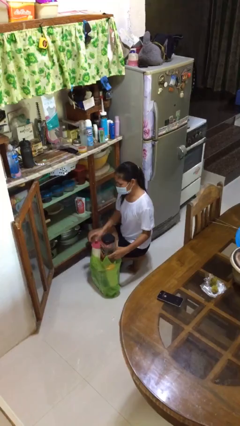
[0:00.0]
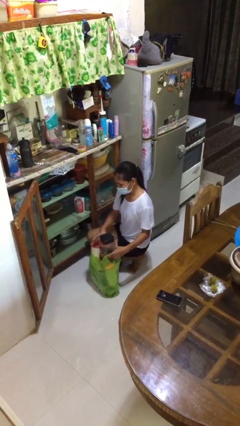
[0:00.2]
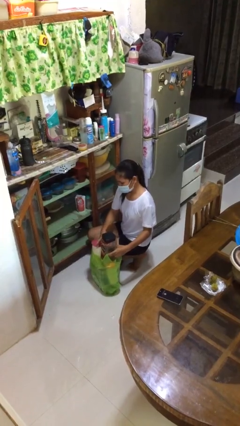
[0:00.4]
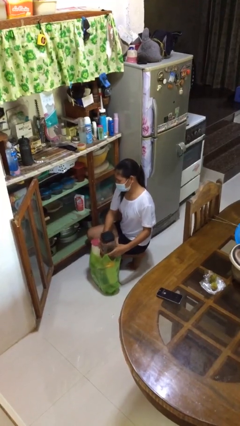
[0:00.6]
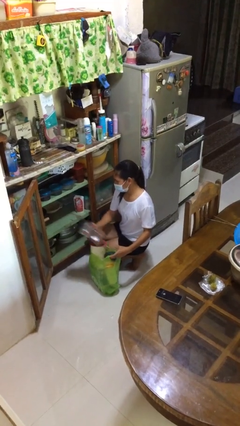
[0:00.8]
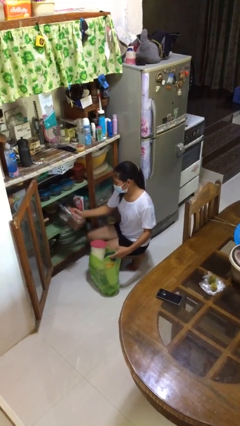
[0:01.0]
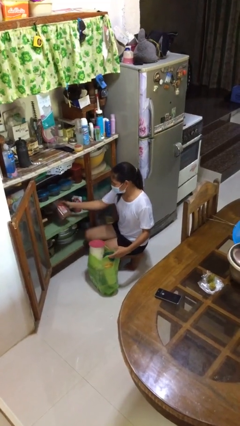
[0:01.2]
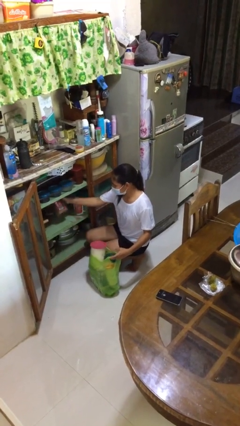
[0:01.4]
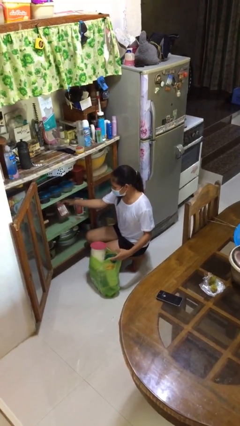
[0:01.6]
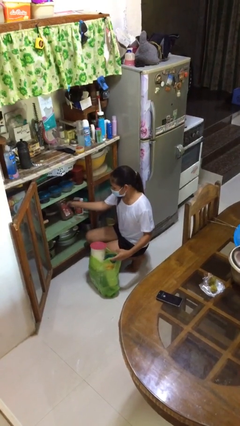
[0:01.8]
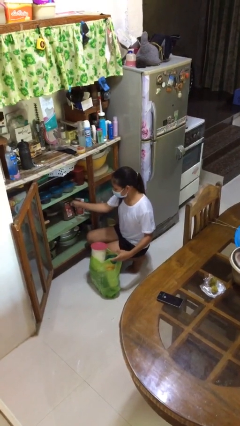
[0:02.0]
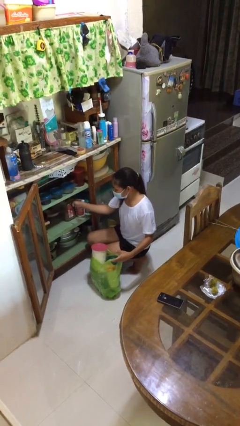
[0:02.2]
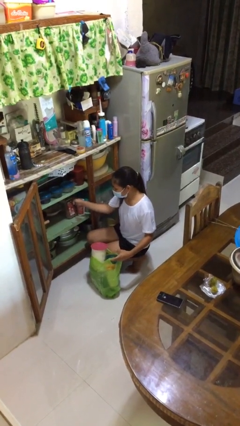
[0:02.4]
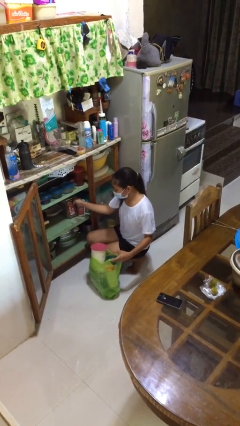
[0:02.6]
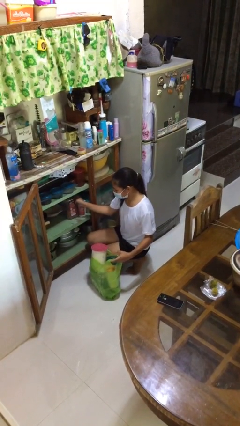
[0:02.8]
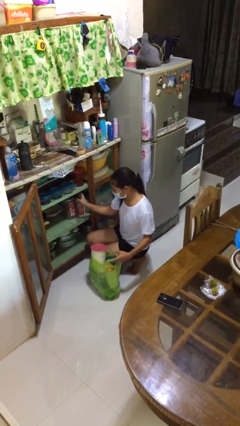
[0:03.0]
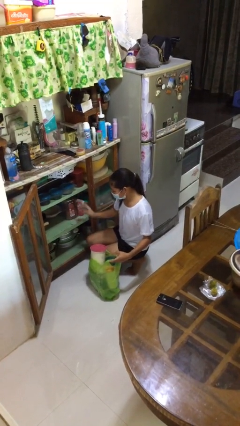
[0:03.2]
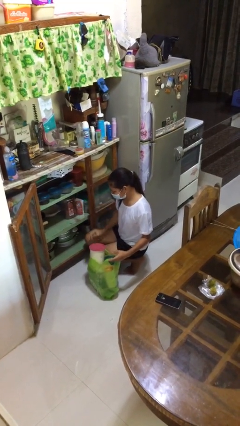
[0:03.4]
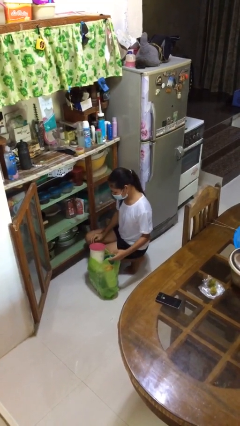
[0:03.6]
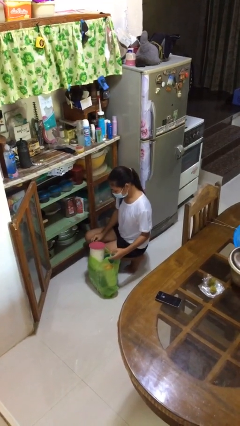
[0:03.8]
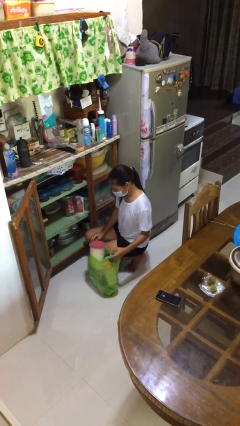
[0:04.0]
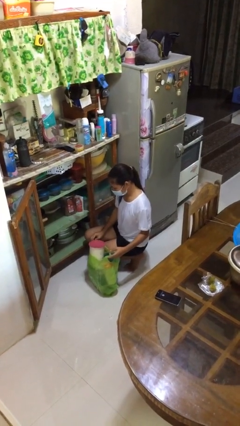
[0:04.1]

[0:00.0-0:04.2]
person loads groceries into cabinet

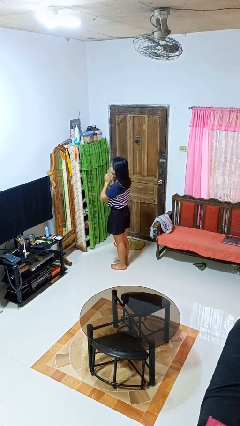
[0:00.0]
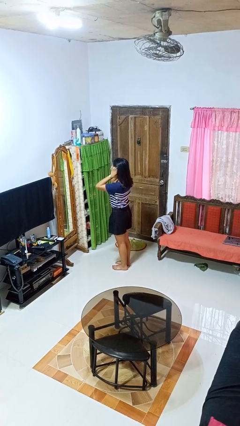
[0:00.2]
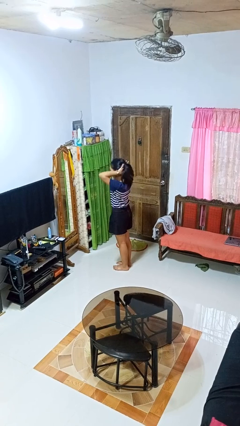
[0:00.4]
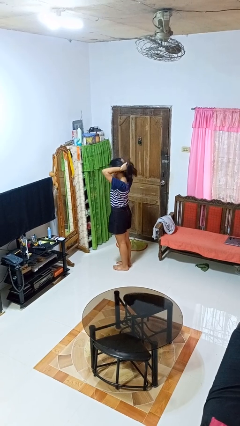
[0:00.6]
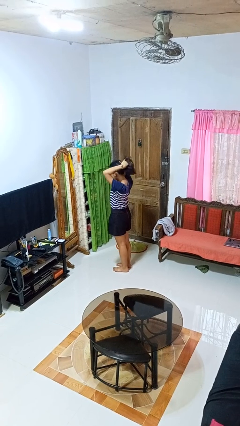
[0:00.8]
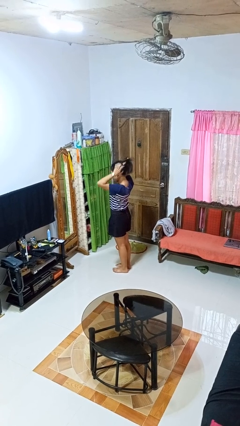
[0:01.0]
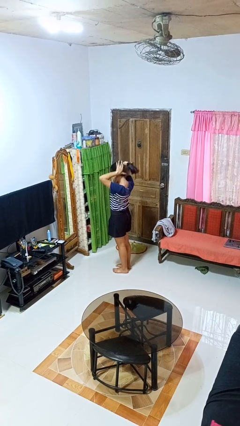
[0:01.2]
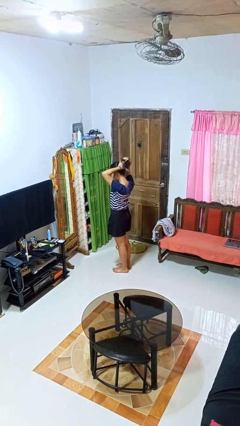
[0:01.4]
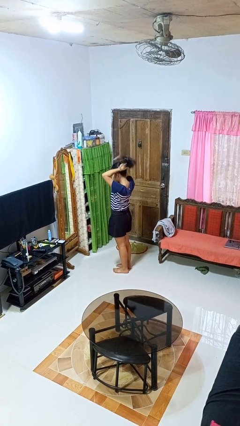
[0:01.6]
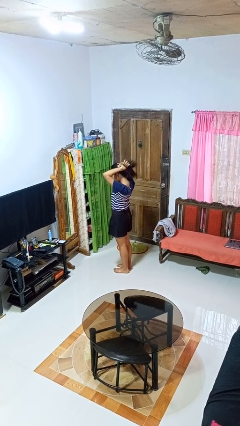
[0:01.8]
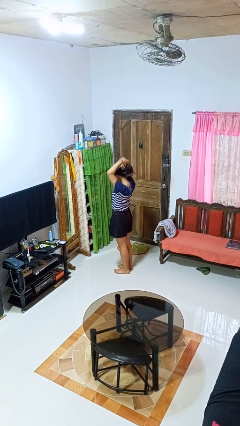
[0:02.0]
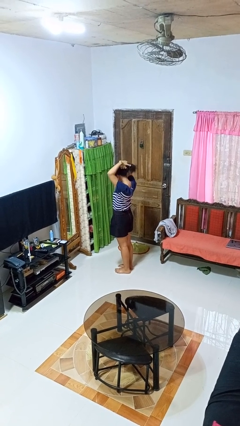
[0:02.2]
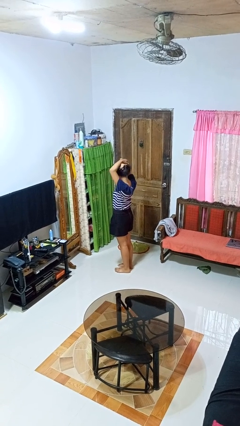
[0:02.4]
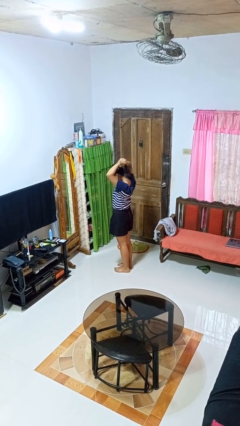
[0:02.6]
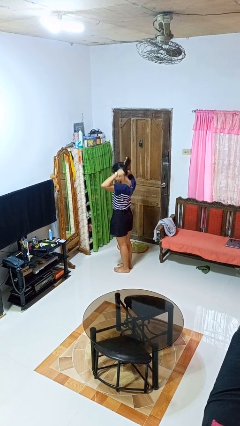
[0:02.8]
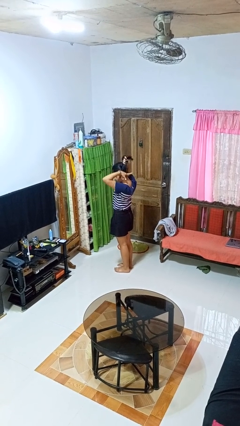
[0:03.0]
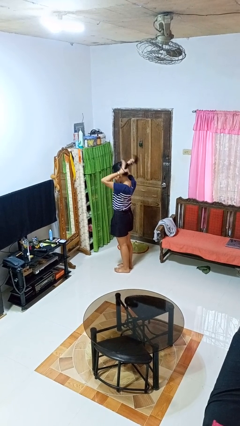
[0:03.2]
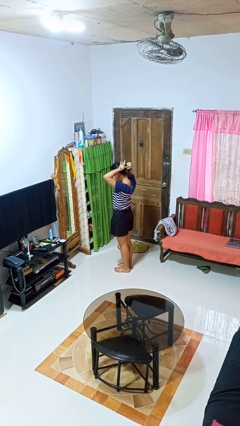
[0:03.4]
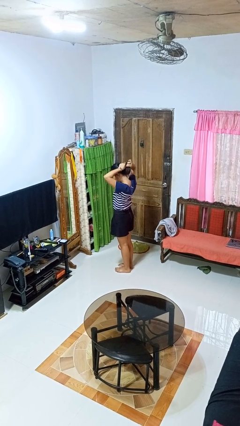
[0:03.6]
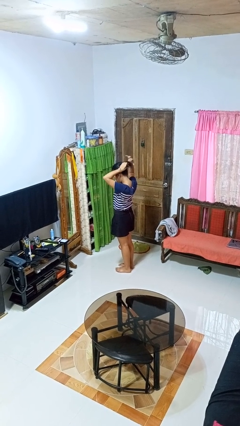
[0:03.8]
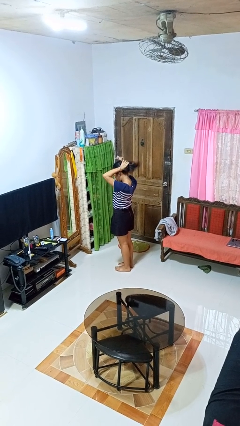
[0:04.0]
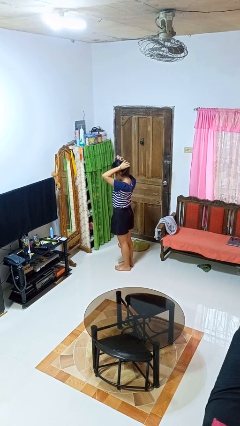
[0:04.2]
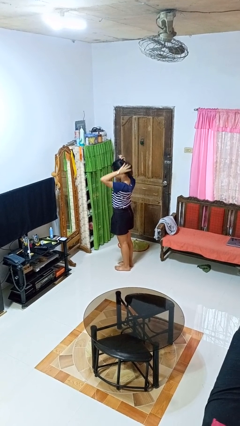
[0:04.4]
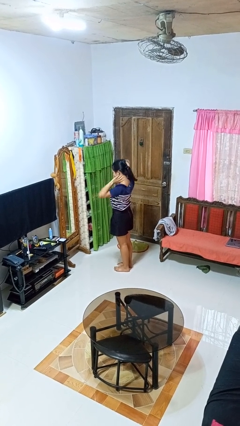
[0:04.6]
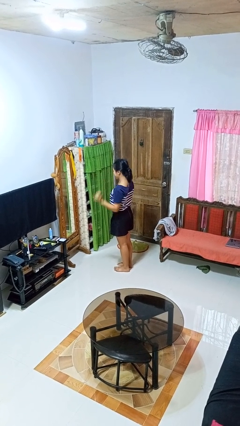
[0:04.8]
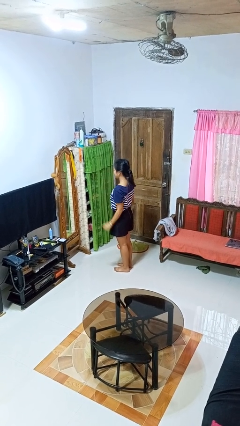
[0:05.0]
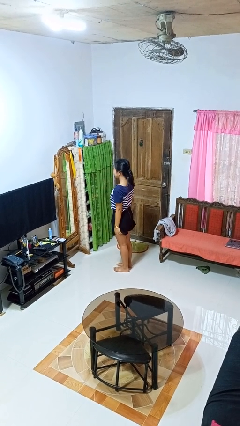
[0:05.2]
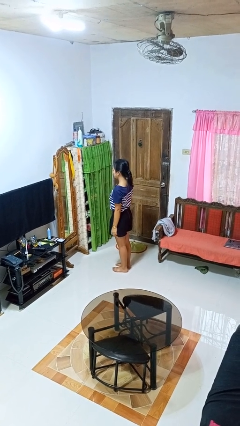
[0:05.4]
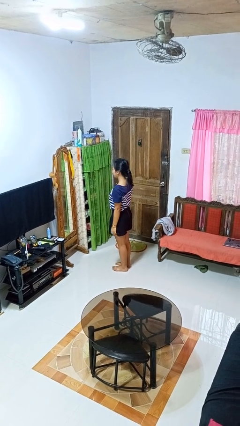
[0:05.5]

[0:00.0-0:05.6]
person puts hair in ponytail

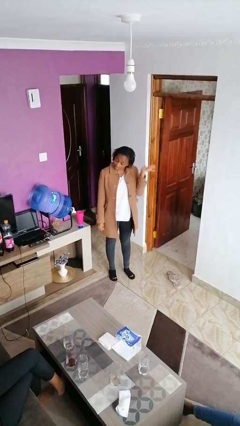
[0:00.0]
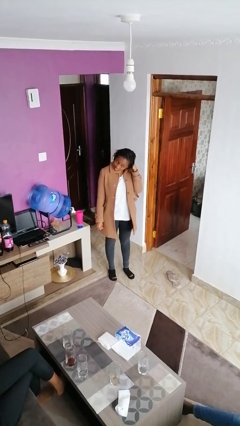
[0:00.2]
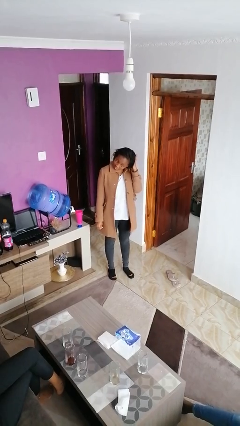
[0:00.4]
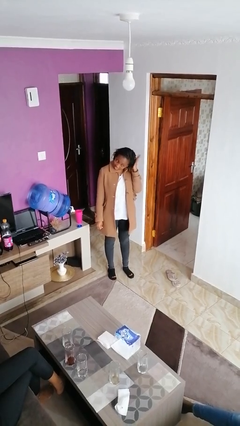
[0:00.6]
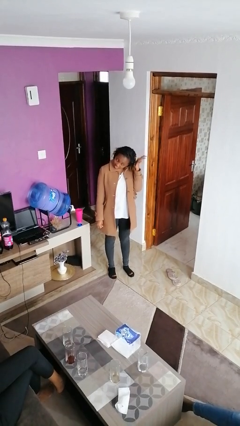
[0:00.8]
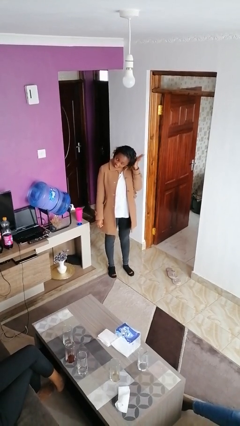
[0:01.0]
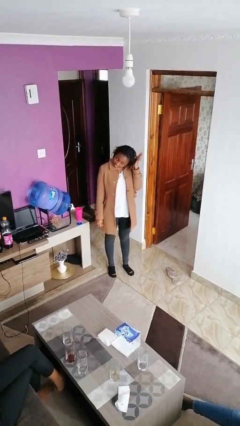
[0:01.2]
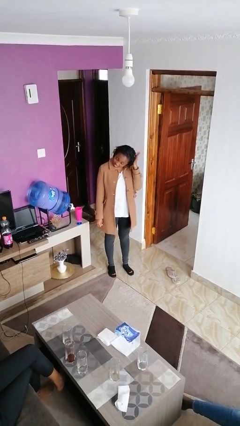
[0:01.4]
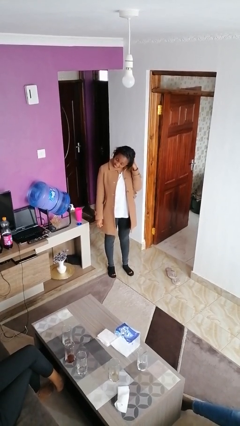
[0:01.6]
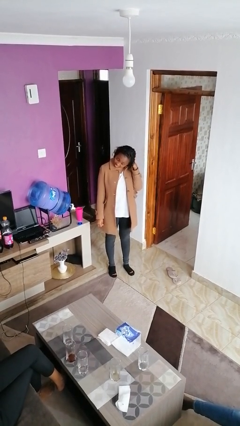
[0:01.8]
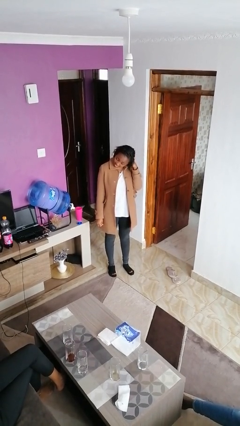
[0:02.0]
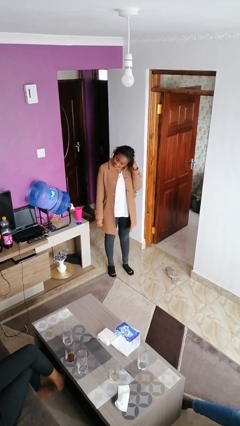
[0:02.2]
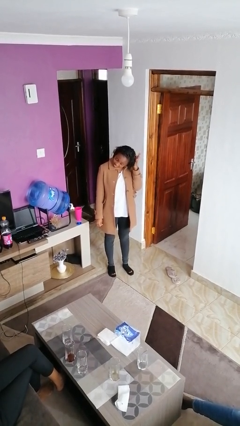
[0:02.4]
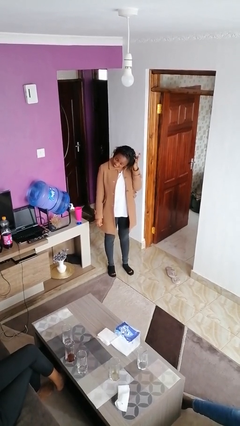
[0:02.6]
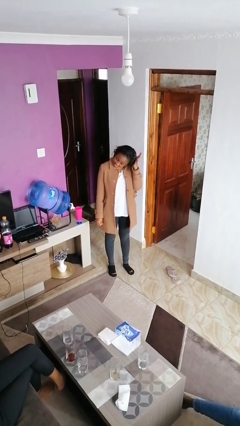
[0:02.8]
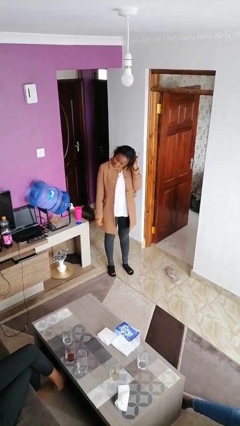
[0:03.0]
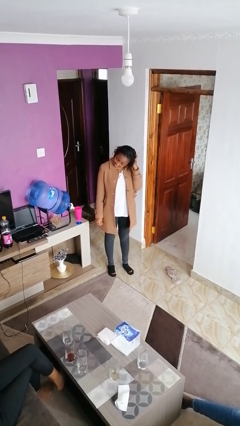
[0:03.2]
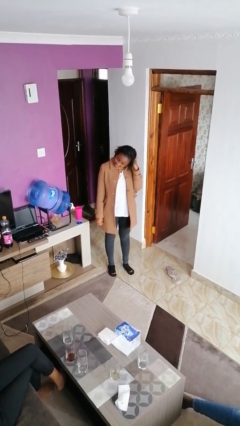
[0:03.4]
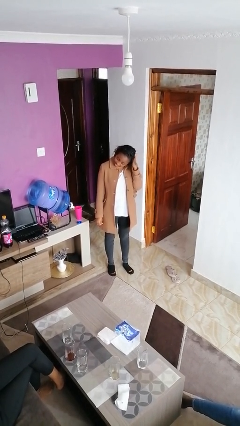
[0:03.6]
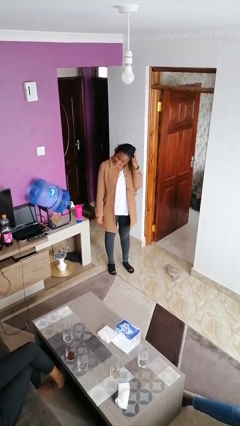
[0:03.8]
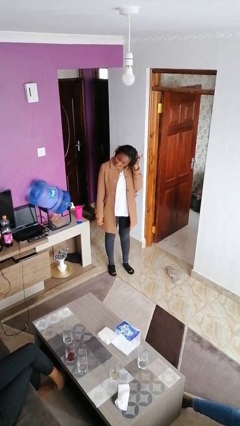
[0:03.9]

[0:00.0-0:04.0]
person scratches face

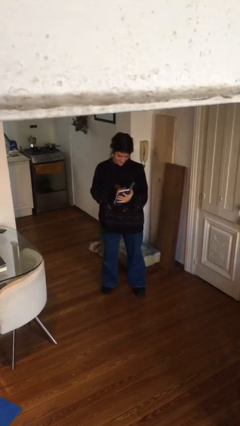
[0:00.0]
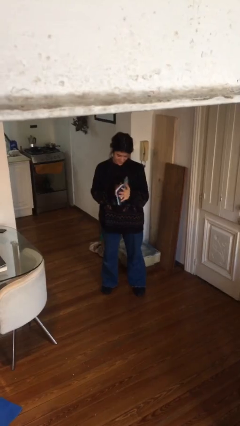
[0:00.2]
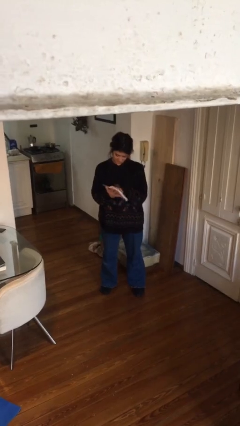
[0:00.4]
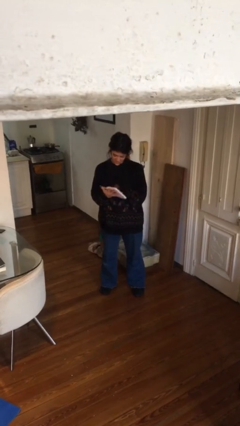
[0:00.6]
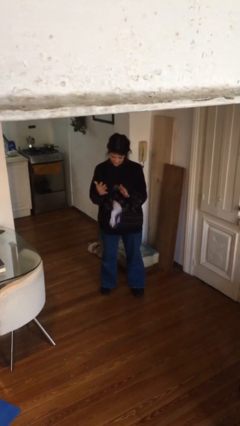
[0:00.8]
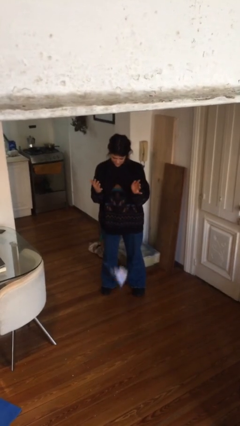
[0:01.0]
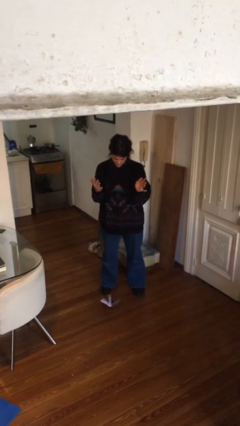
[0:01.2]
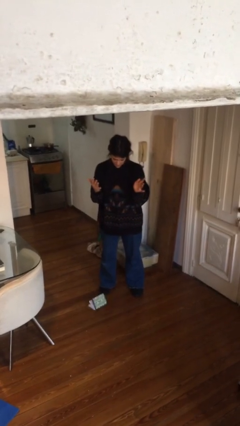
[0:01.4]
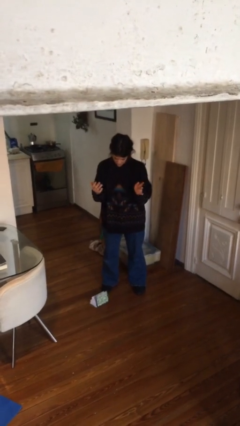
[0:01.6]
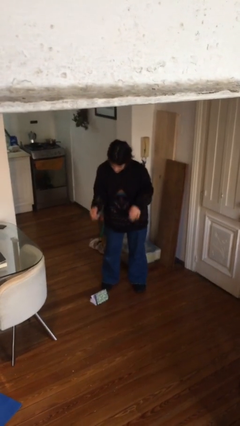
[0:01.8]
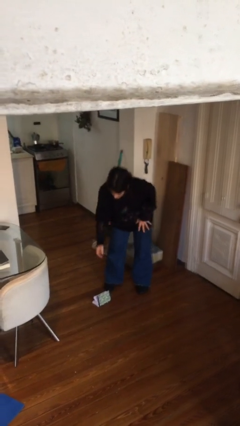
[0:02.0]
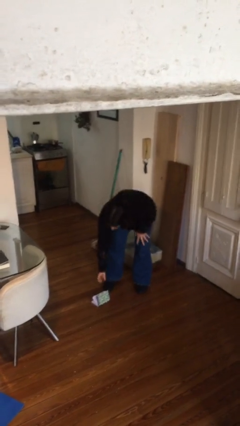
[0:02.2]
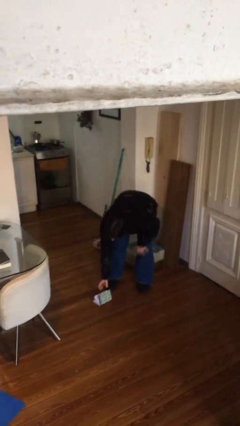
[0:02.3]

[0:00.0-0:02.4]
person drops object

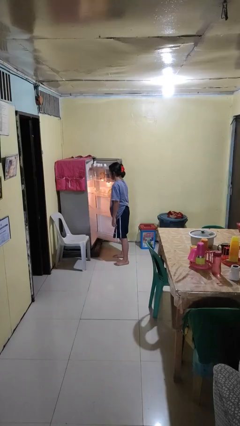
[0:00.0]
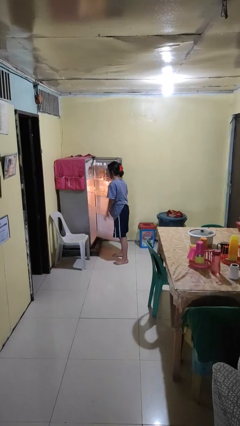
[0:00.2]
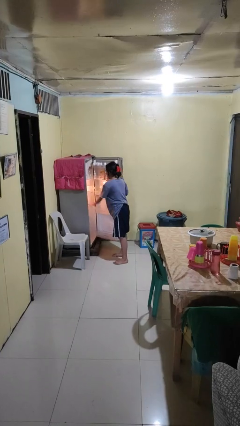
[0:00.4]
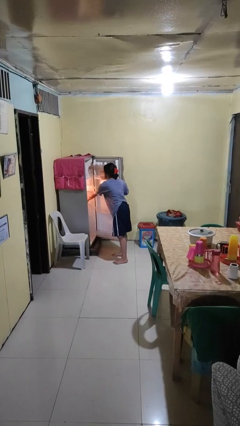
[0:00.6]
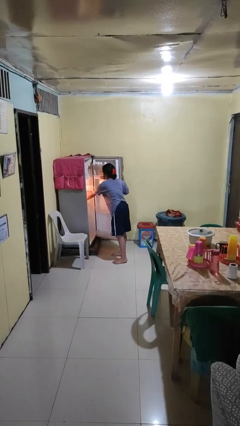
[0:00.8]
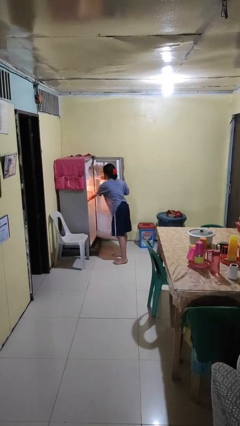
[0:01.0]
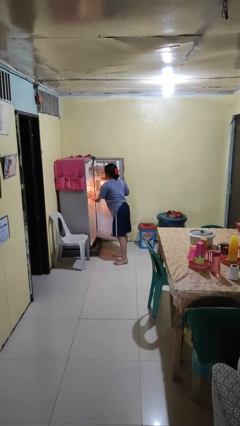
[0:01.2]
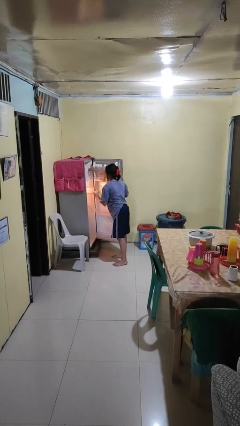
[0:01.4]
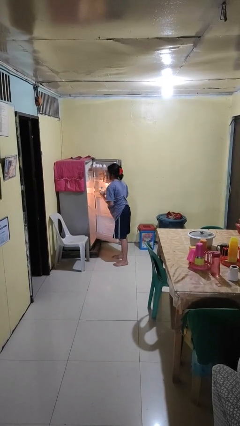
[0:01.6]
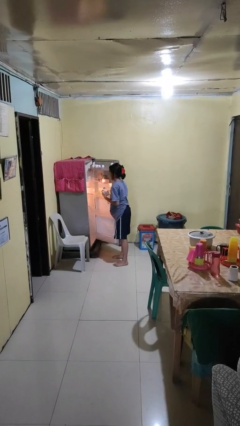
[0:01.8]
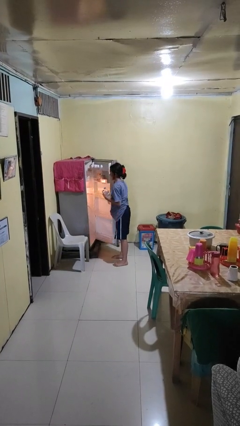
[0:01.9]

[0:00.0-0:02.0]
person takes object from refrigerator
